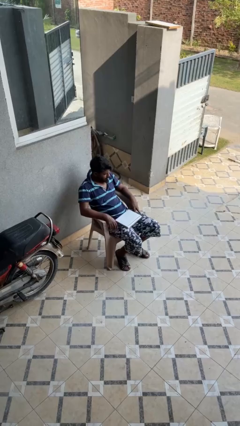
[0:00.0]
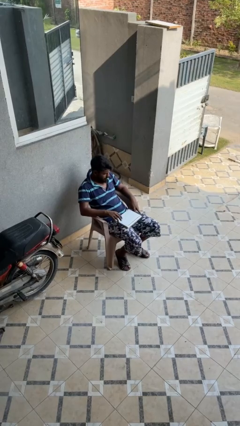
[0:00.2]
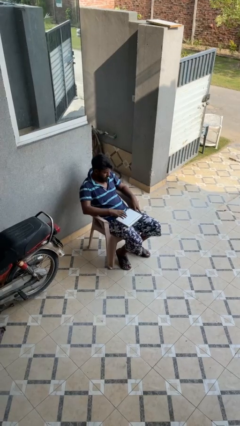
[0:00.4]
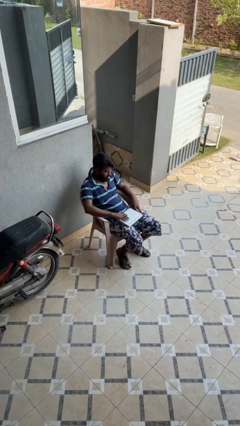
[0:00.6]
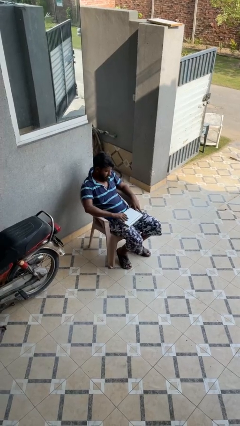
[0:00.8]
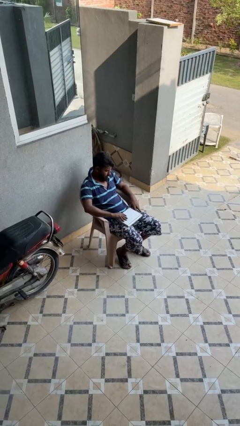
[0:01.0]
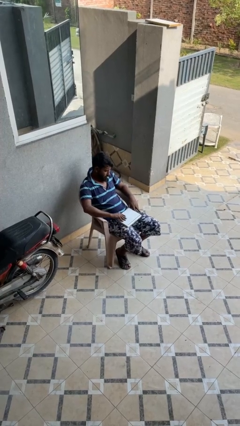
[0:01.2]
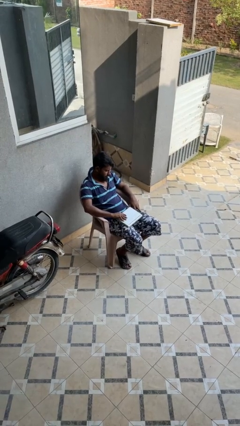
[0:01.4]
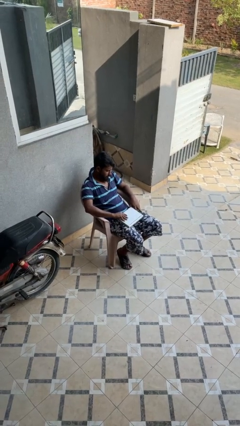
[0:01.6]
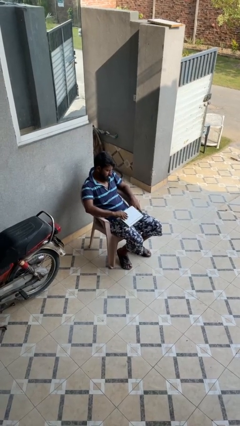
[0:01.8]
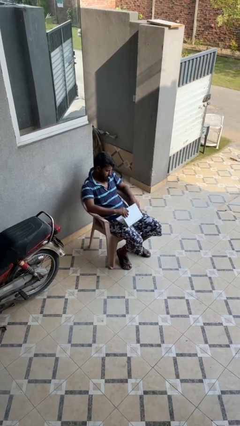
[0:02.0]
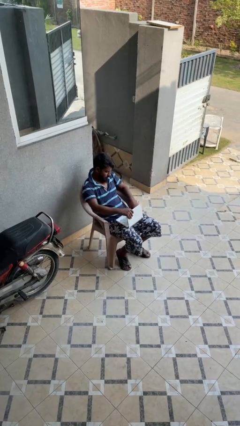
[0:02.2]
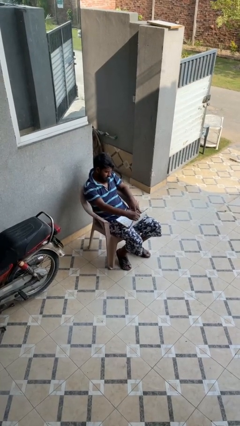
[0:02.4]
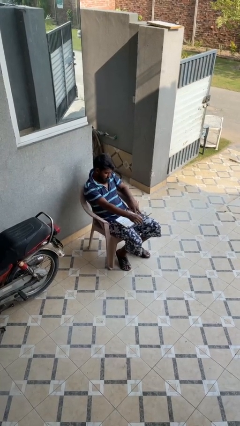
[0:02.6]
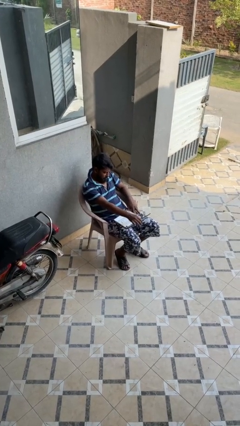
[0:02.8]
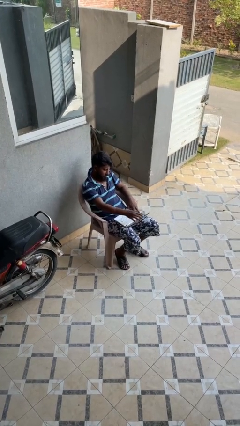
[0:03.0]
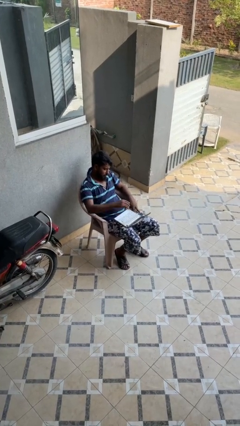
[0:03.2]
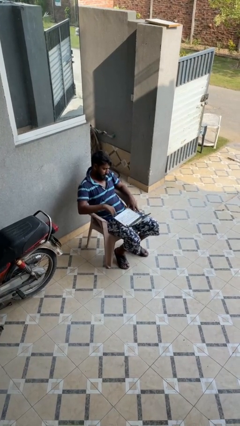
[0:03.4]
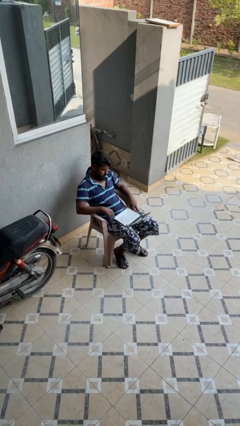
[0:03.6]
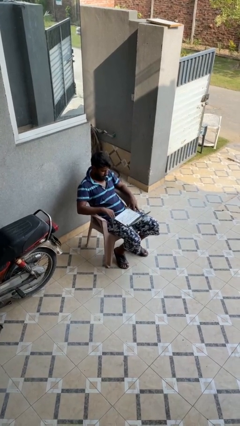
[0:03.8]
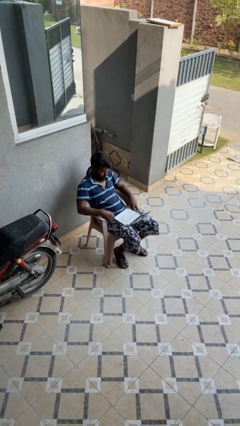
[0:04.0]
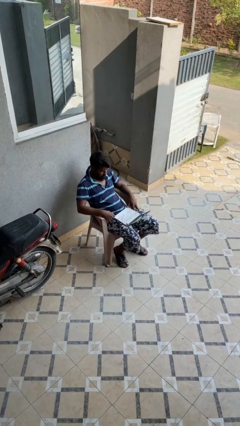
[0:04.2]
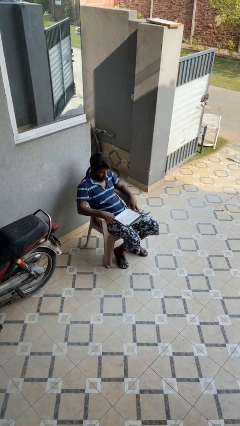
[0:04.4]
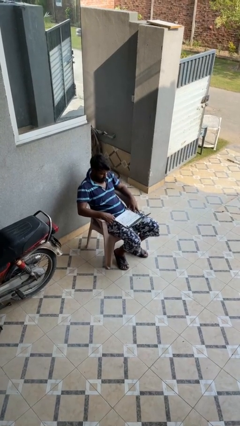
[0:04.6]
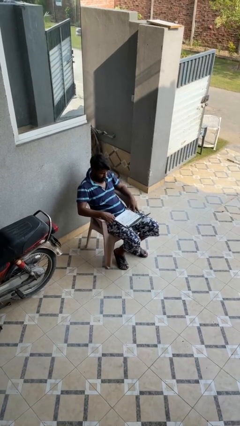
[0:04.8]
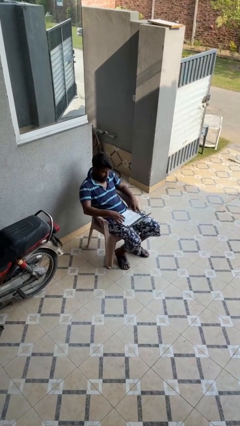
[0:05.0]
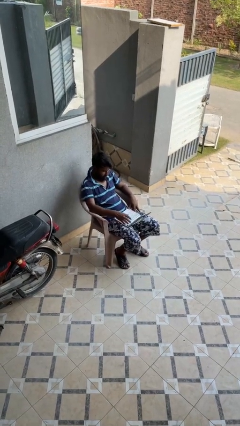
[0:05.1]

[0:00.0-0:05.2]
person opens laptop

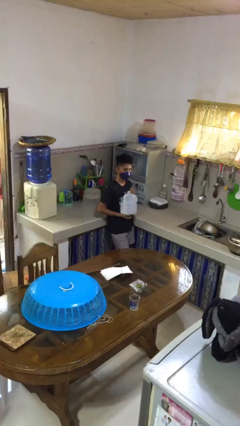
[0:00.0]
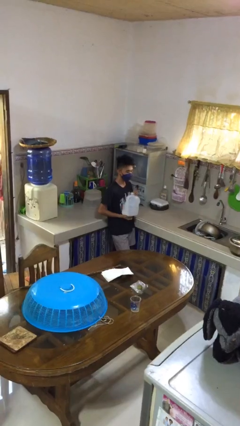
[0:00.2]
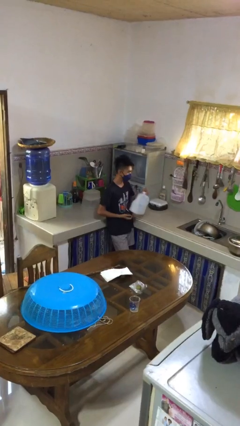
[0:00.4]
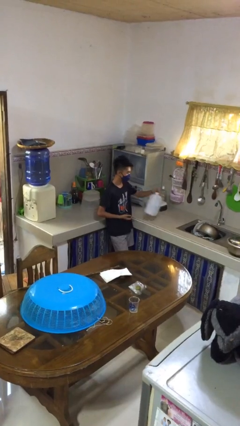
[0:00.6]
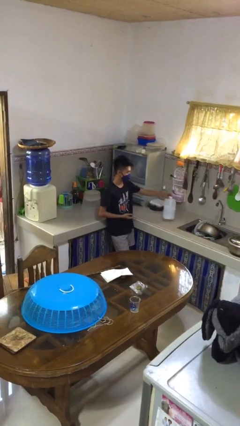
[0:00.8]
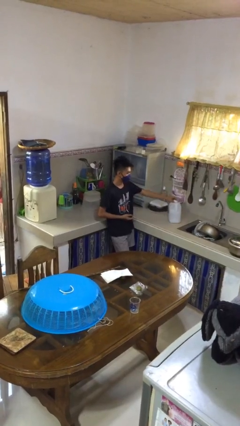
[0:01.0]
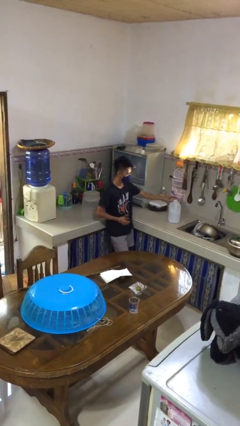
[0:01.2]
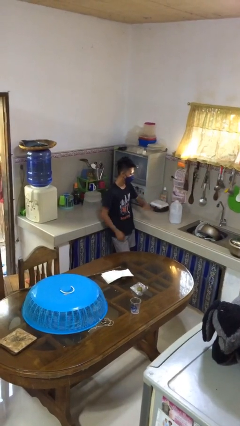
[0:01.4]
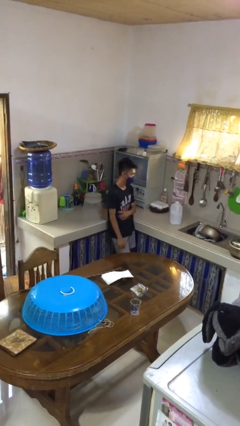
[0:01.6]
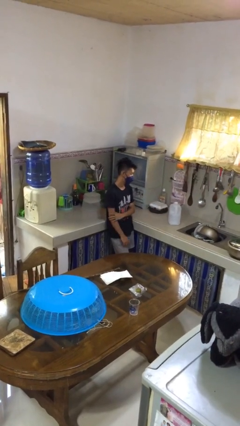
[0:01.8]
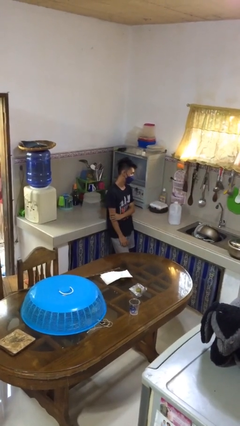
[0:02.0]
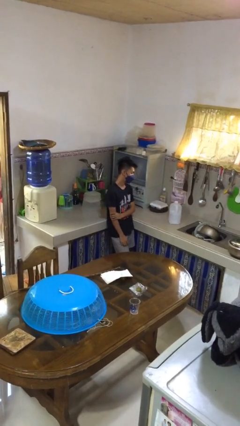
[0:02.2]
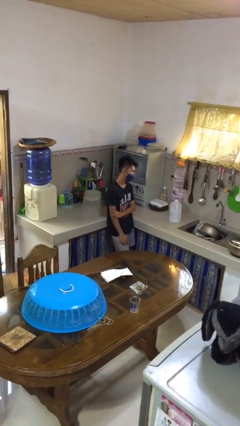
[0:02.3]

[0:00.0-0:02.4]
person picks up object from countertop

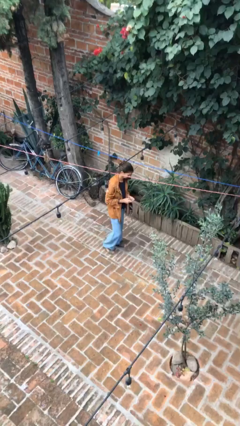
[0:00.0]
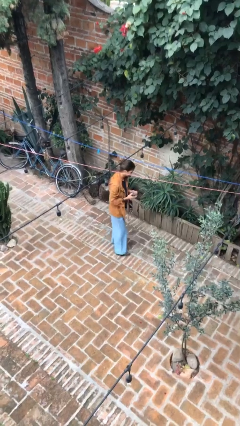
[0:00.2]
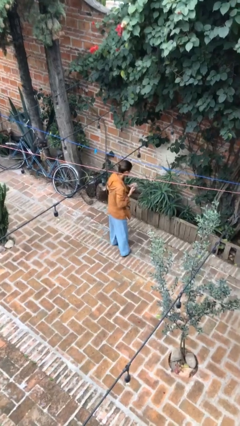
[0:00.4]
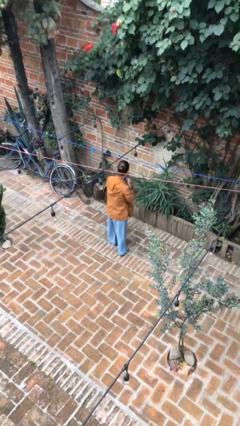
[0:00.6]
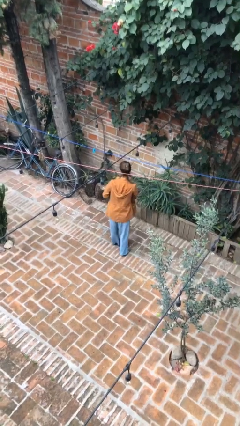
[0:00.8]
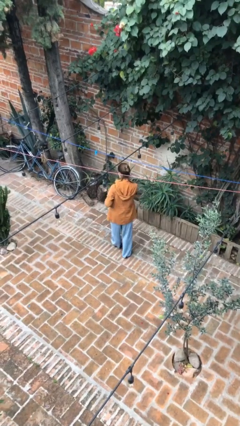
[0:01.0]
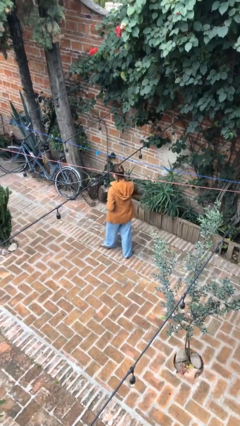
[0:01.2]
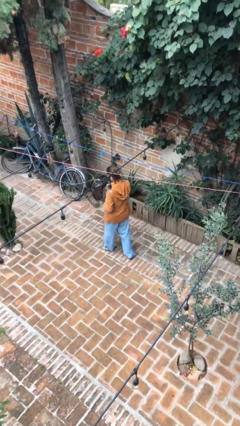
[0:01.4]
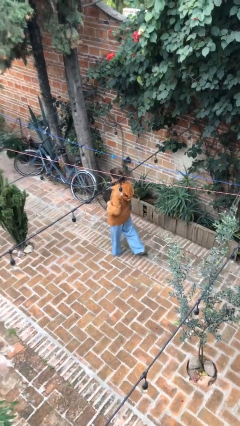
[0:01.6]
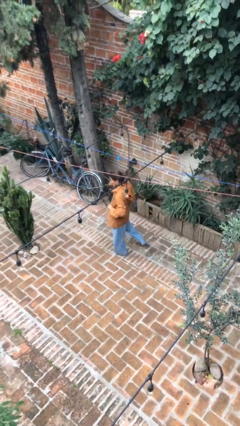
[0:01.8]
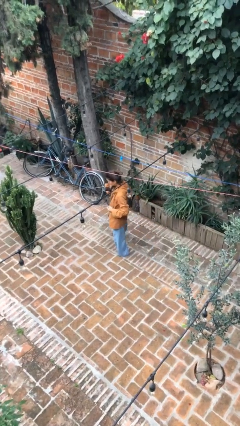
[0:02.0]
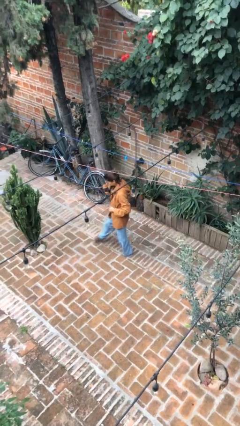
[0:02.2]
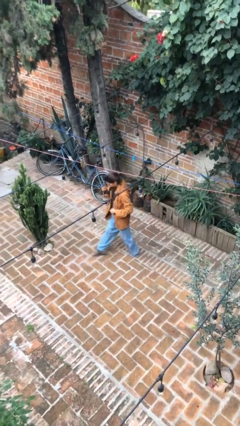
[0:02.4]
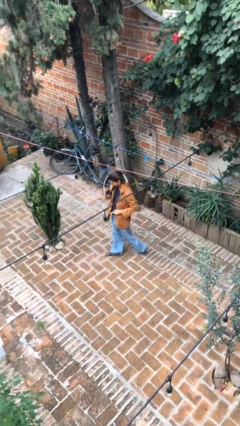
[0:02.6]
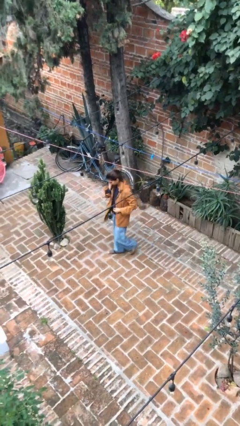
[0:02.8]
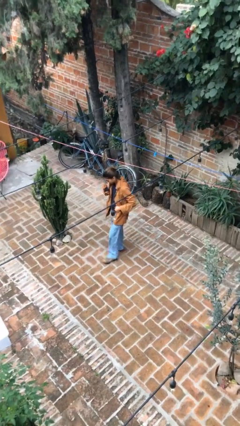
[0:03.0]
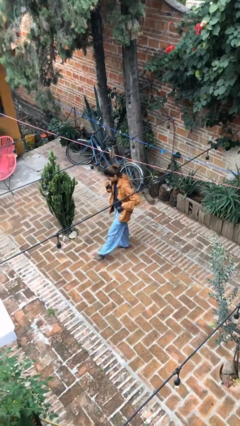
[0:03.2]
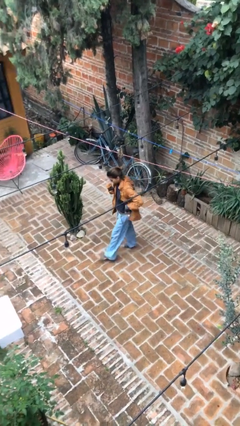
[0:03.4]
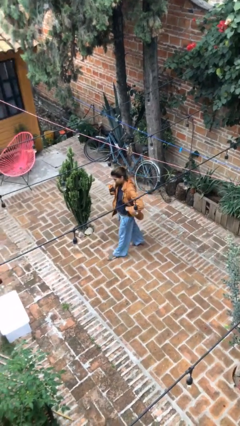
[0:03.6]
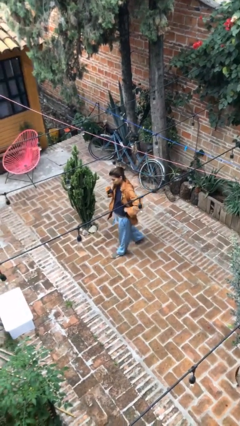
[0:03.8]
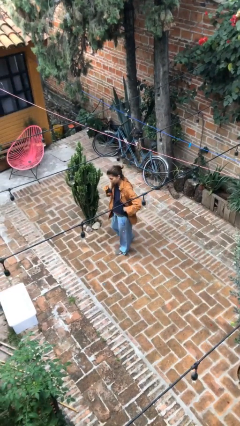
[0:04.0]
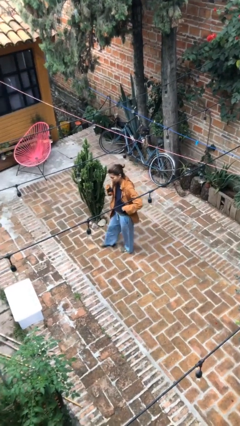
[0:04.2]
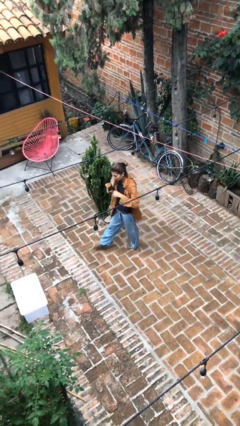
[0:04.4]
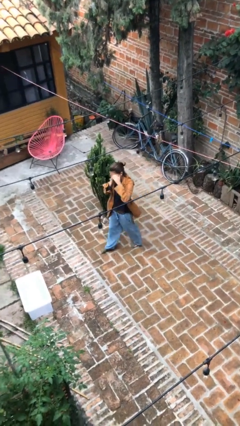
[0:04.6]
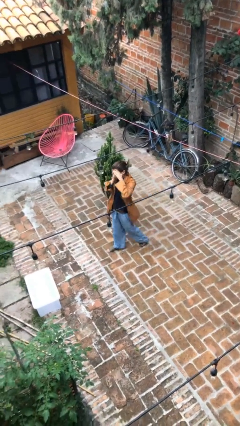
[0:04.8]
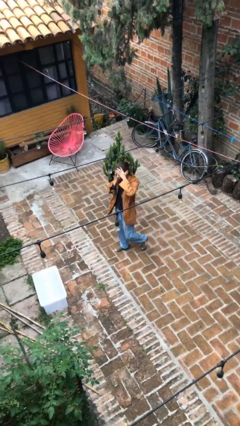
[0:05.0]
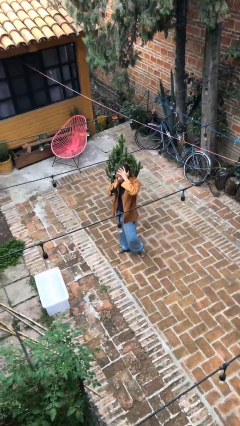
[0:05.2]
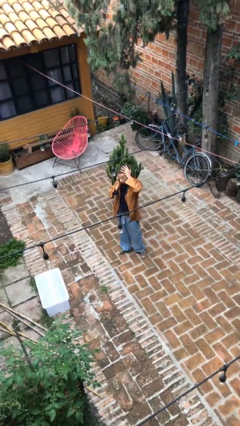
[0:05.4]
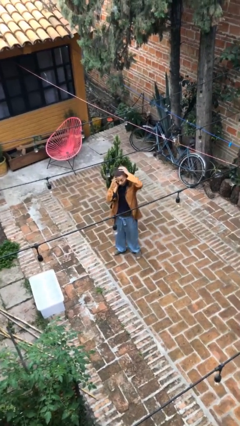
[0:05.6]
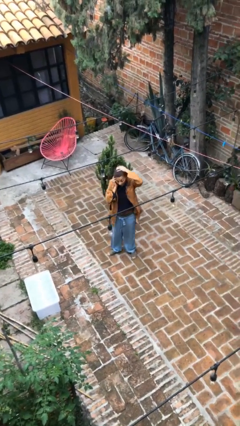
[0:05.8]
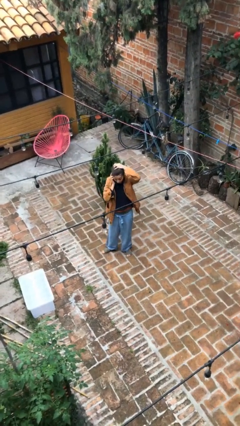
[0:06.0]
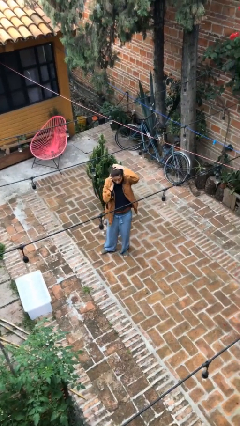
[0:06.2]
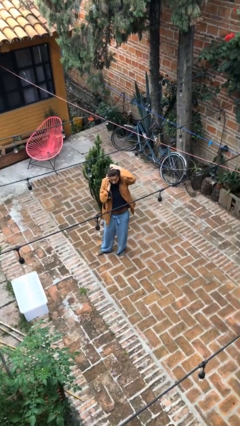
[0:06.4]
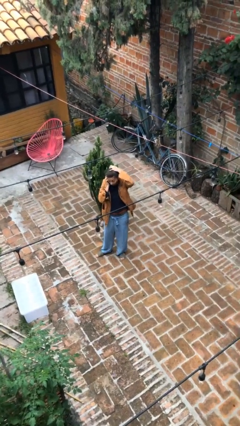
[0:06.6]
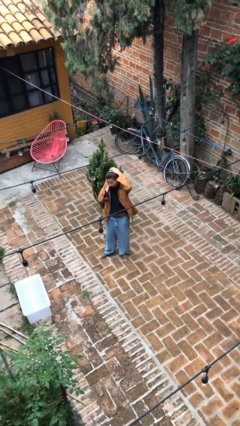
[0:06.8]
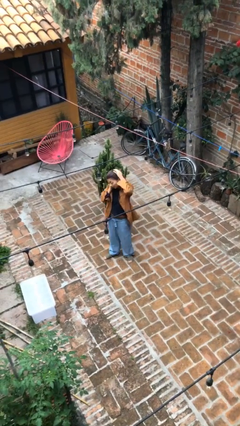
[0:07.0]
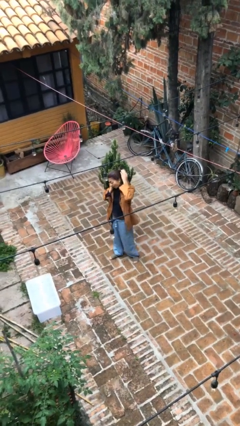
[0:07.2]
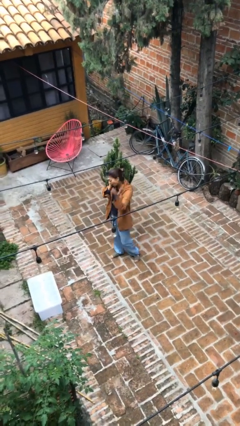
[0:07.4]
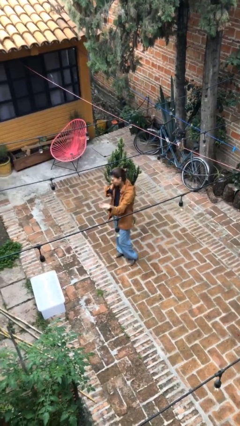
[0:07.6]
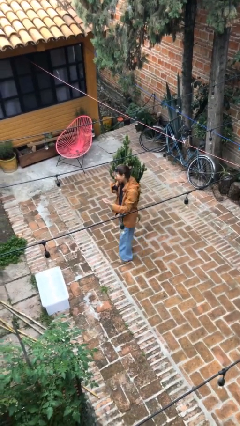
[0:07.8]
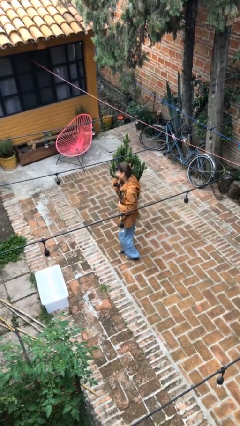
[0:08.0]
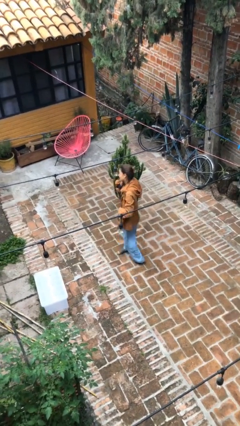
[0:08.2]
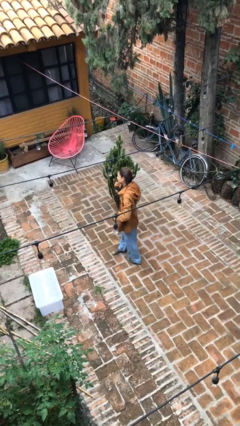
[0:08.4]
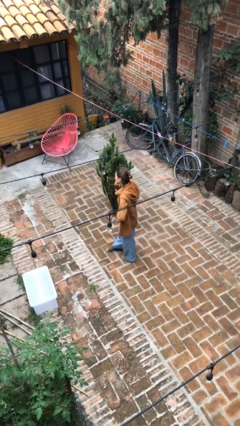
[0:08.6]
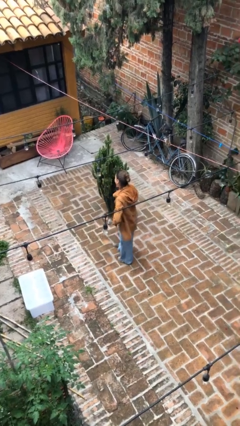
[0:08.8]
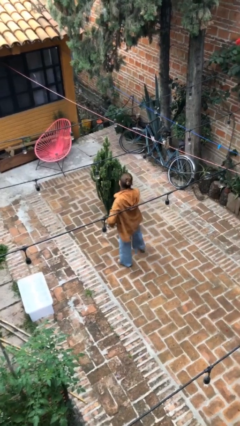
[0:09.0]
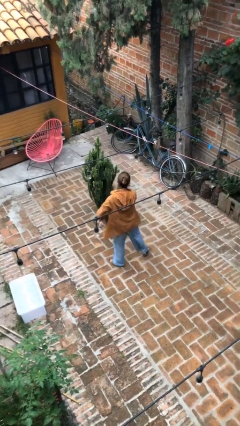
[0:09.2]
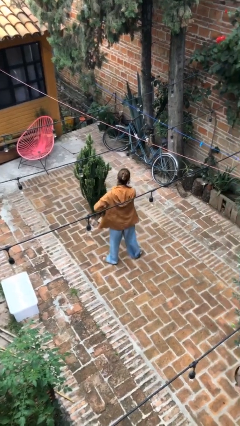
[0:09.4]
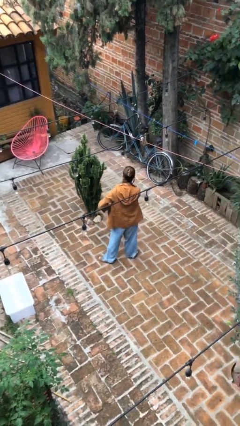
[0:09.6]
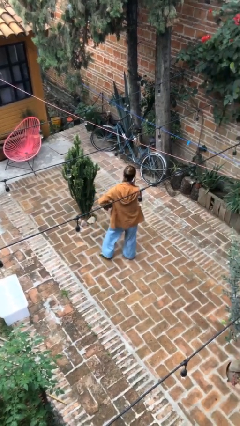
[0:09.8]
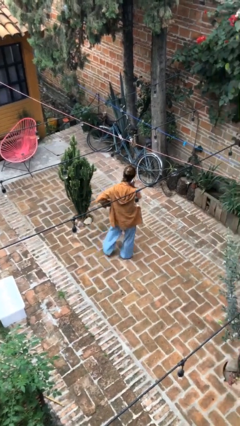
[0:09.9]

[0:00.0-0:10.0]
person talks on phone
